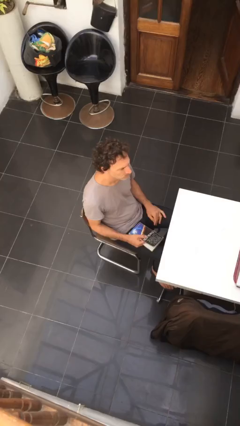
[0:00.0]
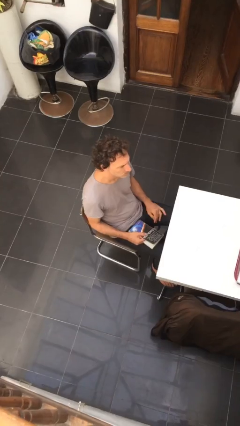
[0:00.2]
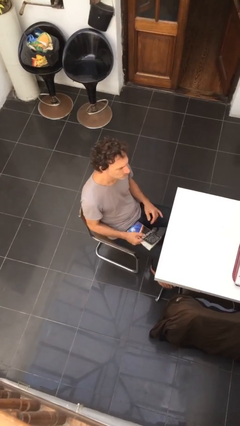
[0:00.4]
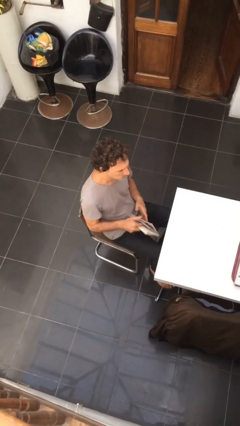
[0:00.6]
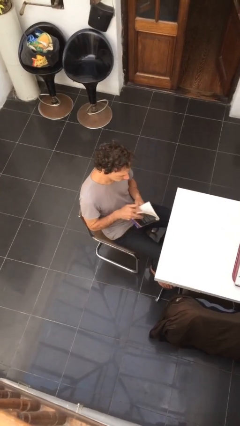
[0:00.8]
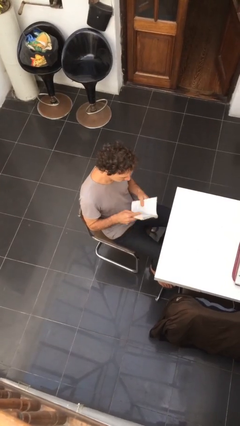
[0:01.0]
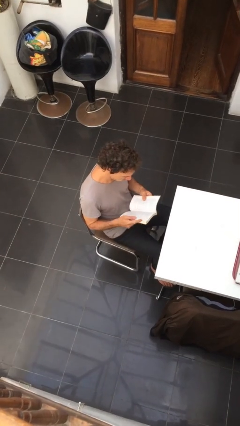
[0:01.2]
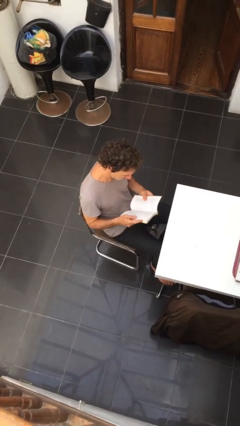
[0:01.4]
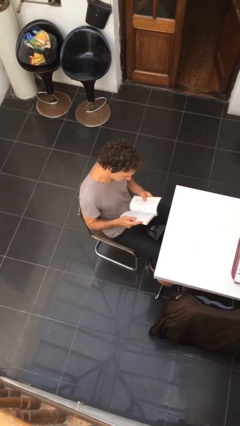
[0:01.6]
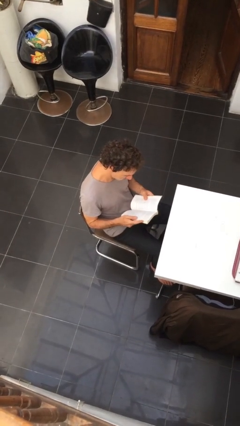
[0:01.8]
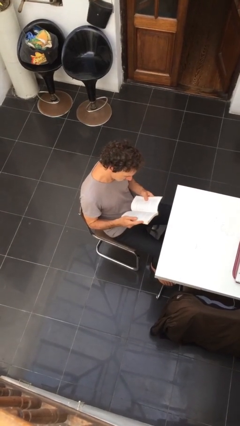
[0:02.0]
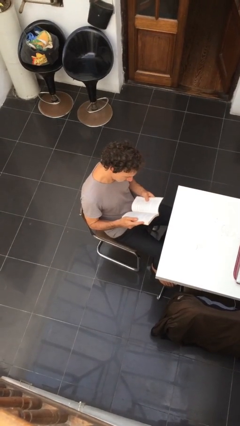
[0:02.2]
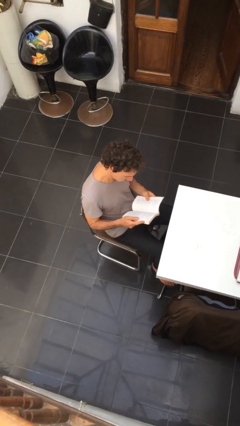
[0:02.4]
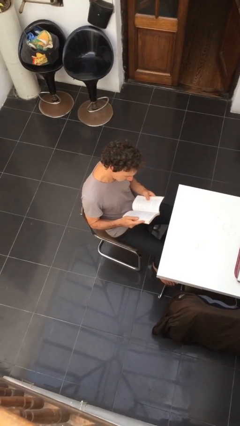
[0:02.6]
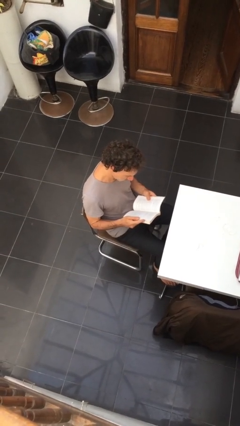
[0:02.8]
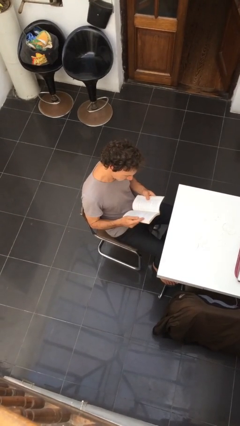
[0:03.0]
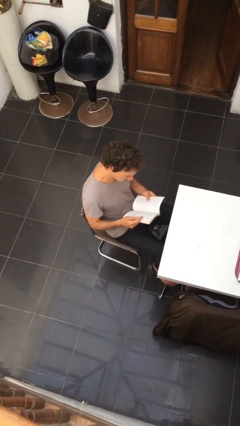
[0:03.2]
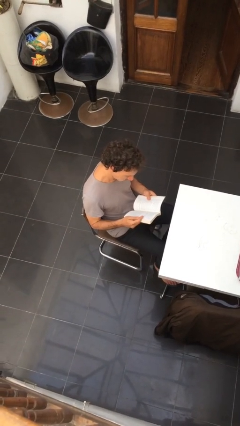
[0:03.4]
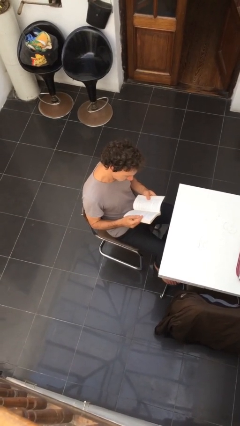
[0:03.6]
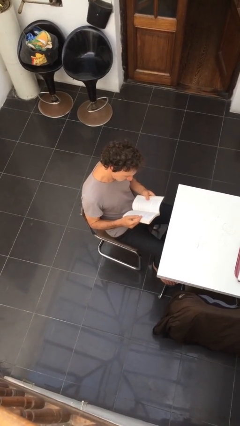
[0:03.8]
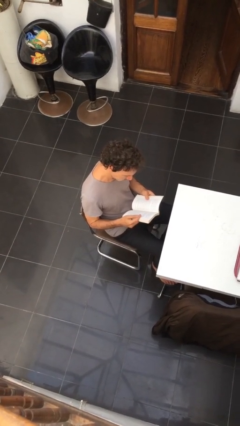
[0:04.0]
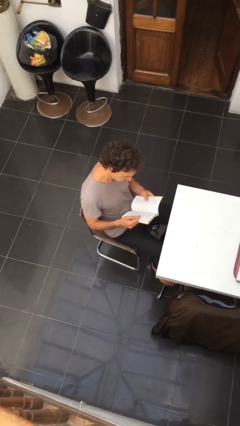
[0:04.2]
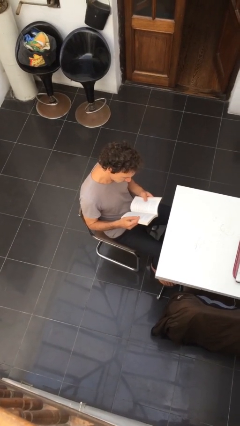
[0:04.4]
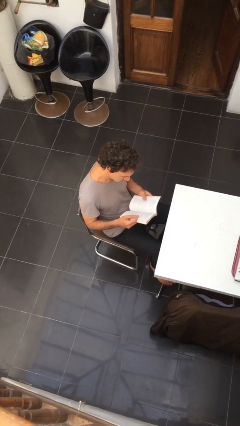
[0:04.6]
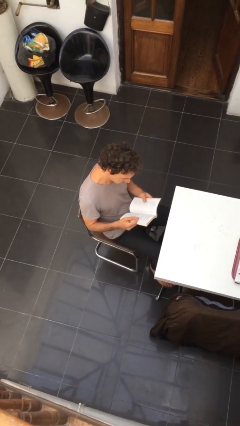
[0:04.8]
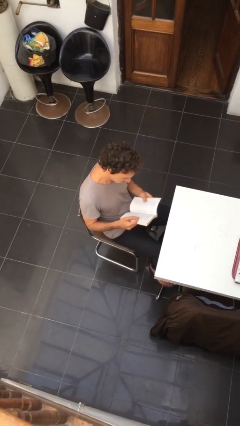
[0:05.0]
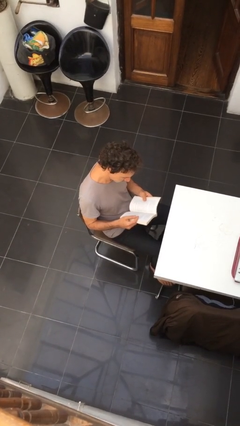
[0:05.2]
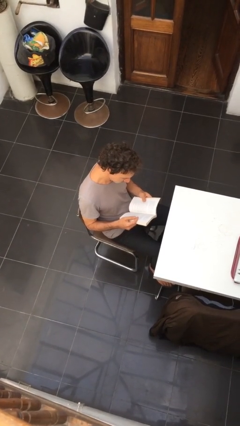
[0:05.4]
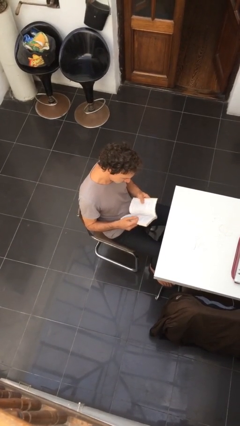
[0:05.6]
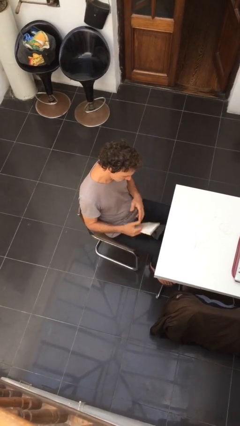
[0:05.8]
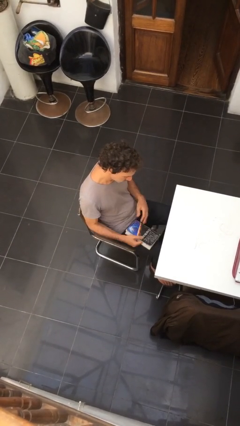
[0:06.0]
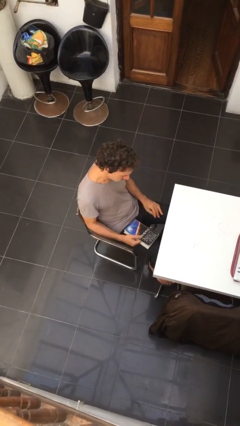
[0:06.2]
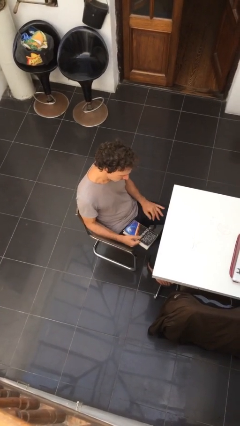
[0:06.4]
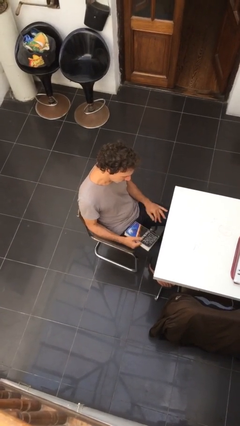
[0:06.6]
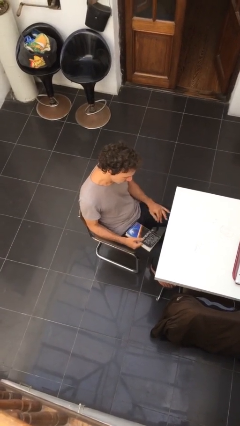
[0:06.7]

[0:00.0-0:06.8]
person reads document

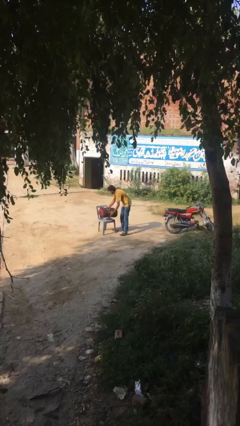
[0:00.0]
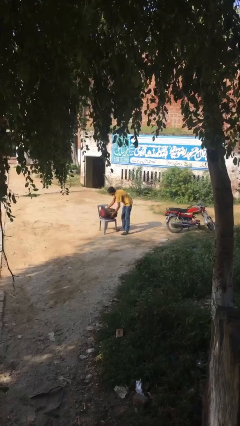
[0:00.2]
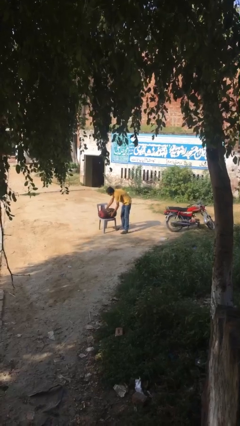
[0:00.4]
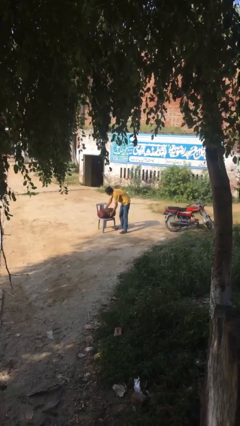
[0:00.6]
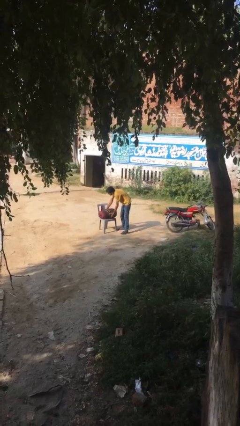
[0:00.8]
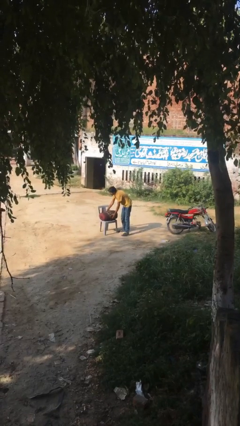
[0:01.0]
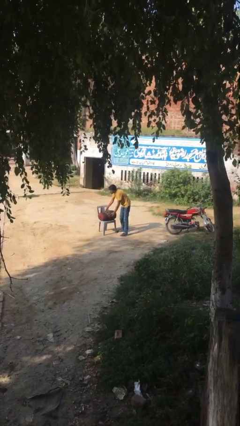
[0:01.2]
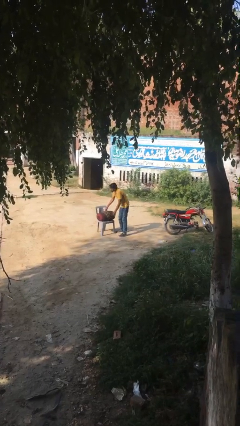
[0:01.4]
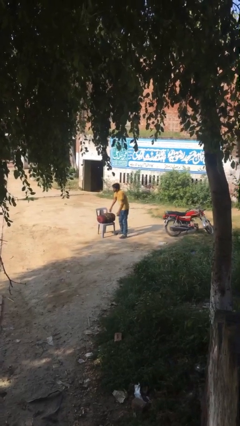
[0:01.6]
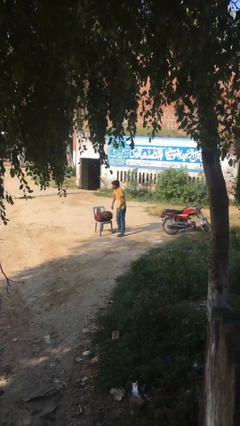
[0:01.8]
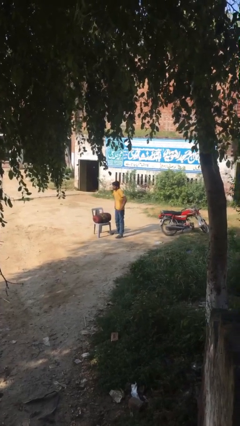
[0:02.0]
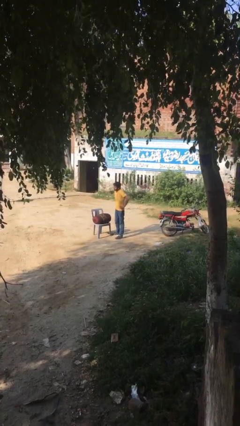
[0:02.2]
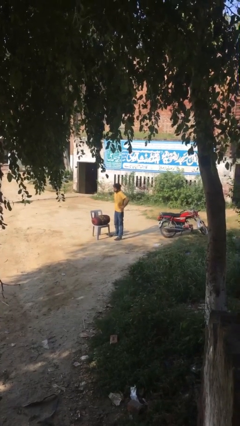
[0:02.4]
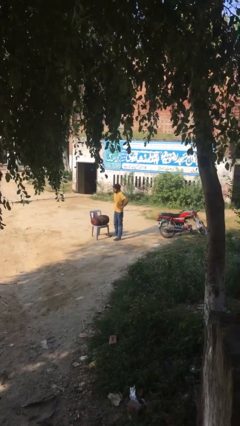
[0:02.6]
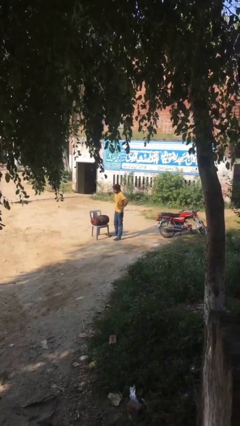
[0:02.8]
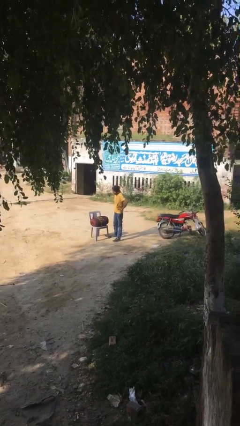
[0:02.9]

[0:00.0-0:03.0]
person puts down object on floor

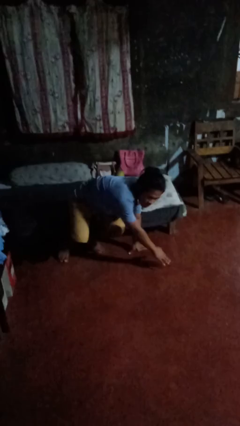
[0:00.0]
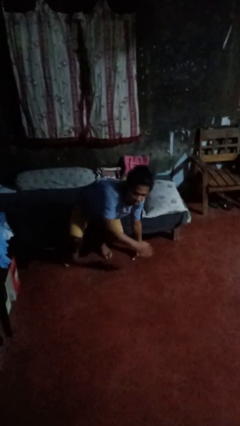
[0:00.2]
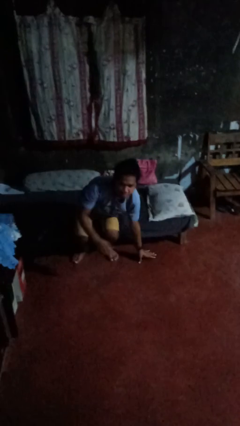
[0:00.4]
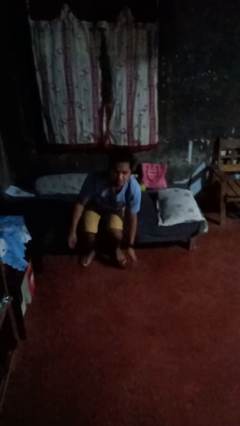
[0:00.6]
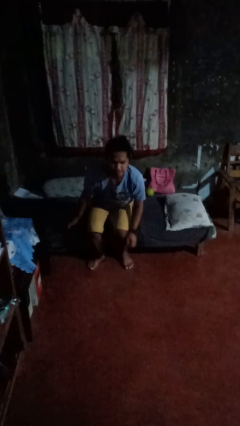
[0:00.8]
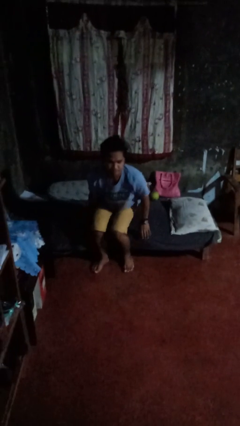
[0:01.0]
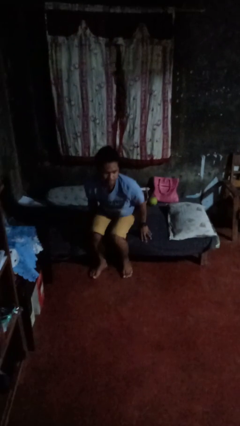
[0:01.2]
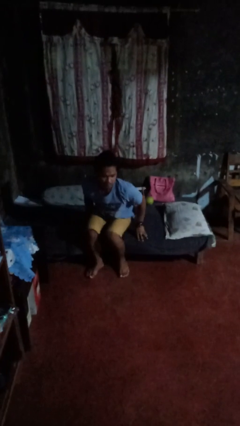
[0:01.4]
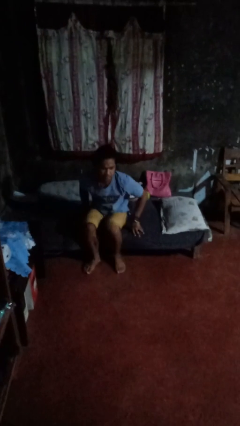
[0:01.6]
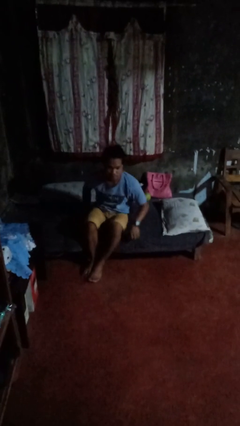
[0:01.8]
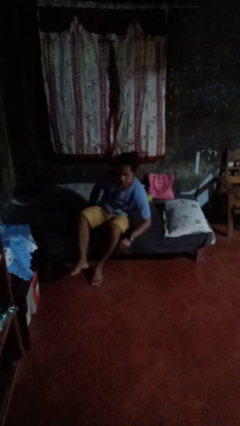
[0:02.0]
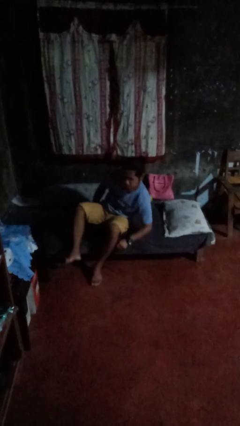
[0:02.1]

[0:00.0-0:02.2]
person stands up from floor

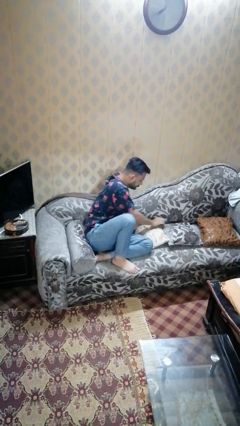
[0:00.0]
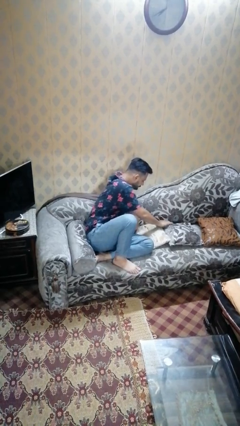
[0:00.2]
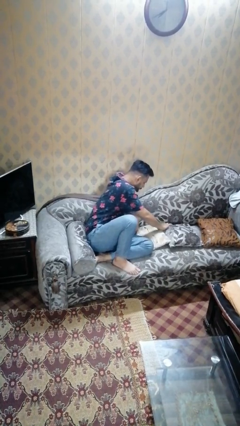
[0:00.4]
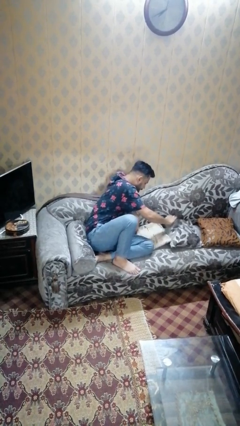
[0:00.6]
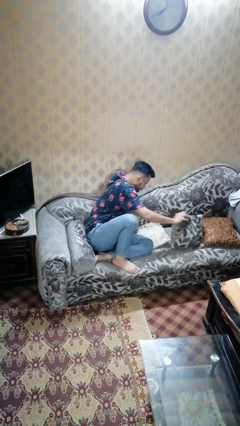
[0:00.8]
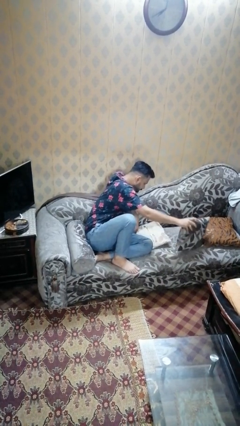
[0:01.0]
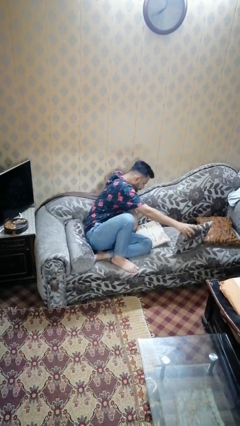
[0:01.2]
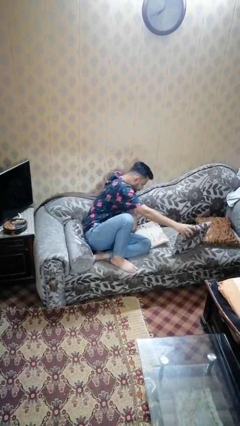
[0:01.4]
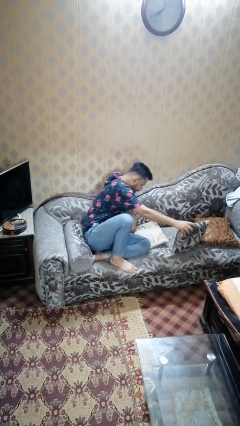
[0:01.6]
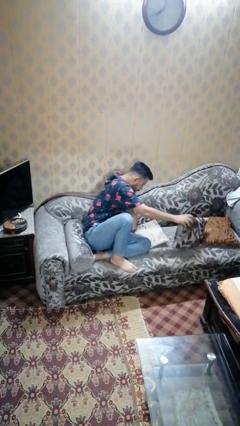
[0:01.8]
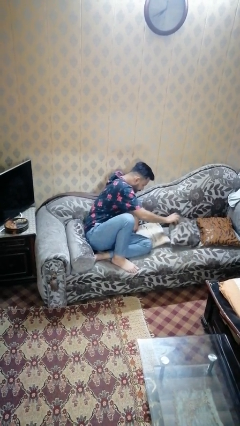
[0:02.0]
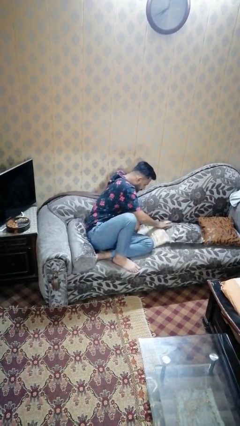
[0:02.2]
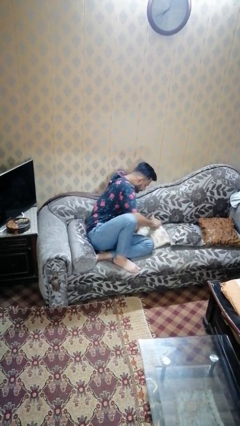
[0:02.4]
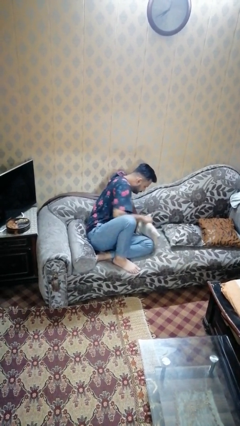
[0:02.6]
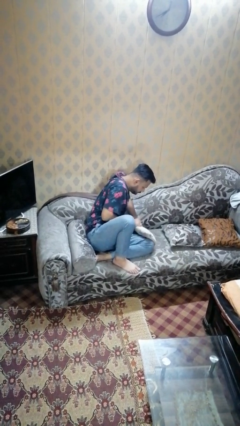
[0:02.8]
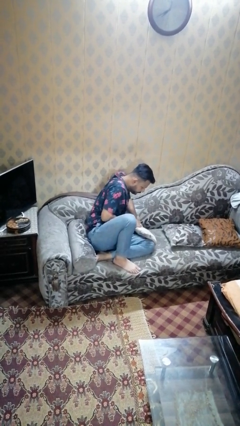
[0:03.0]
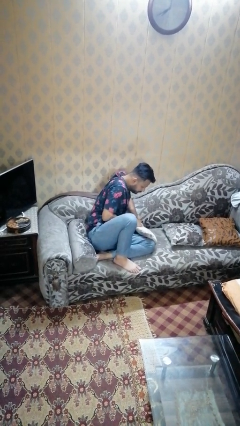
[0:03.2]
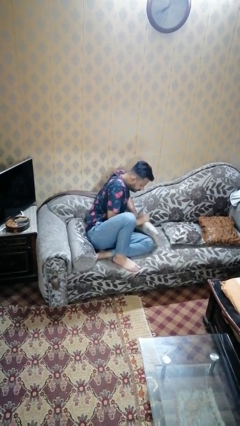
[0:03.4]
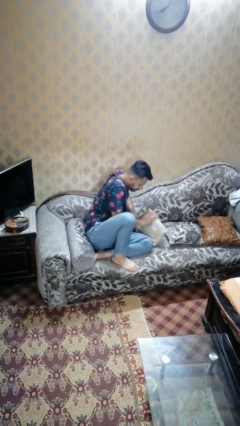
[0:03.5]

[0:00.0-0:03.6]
person searches in couch

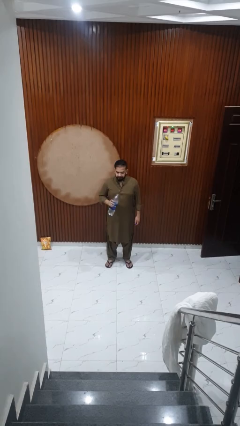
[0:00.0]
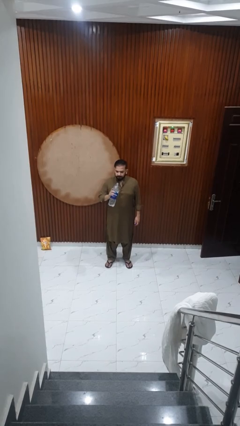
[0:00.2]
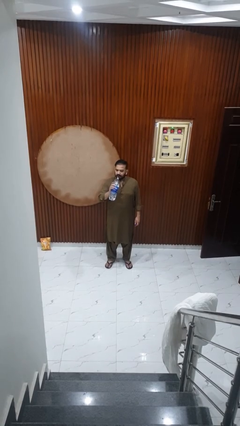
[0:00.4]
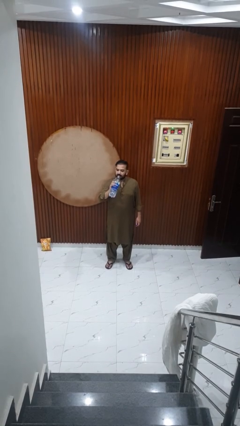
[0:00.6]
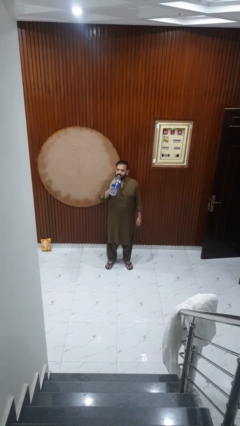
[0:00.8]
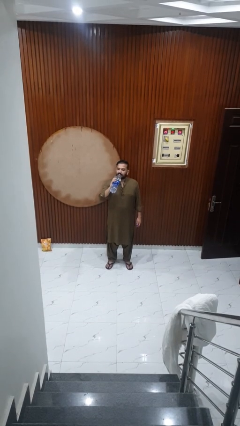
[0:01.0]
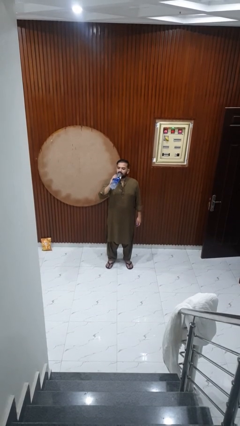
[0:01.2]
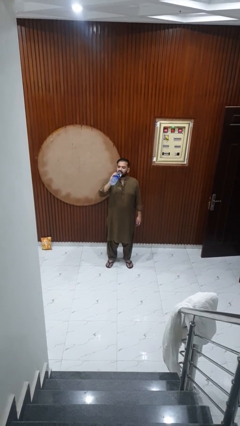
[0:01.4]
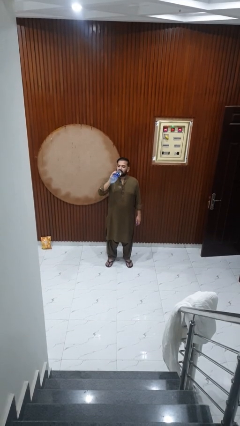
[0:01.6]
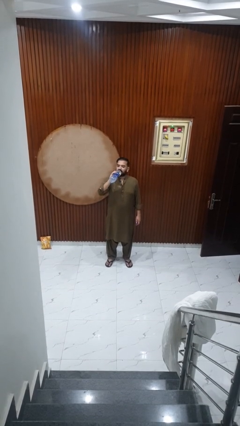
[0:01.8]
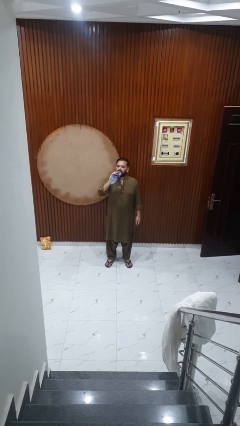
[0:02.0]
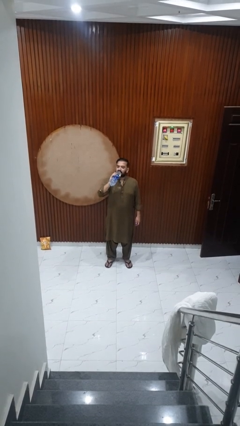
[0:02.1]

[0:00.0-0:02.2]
person drinks from bottle
